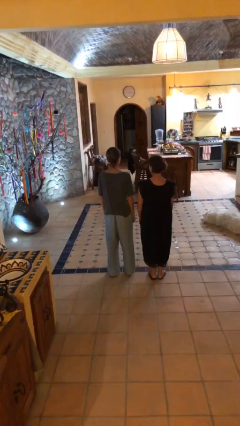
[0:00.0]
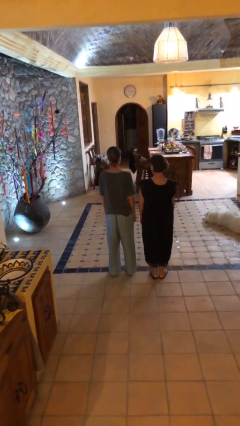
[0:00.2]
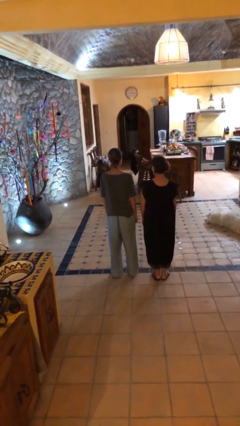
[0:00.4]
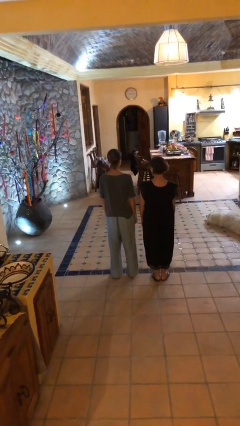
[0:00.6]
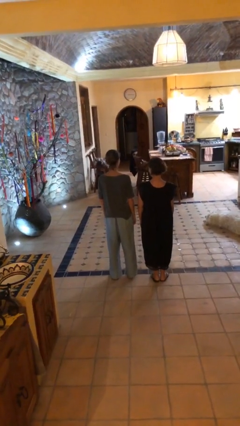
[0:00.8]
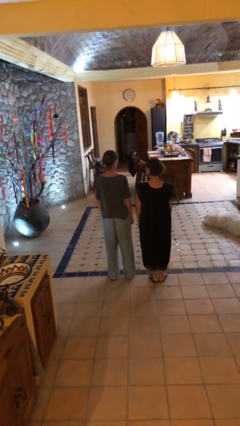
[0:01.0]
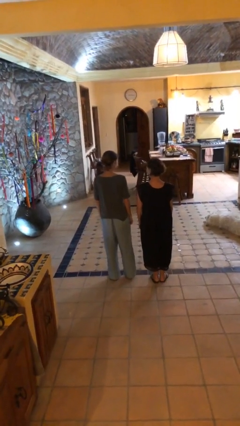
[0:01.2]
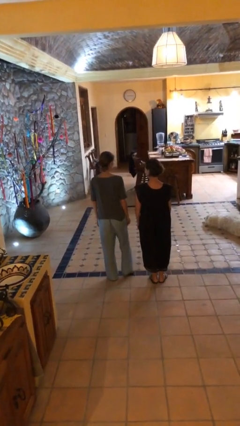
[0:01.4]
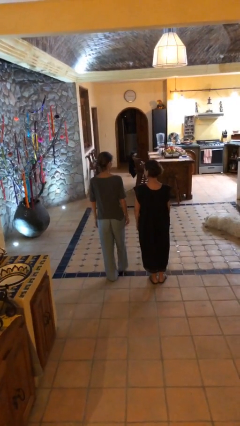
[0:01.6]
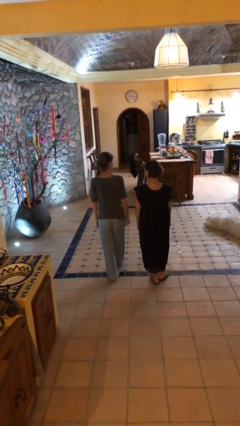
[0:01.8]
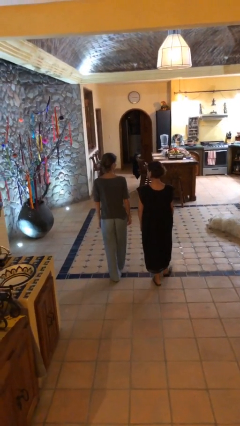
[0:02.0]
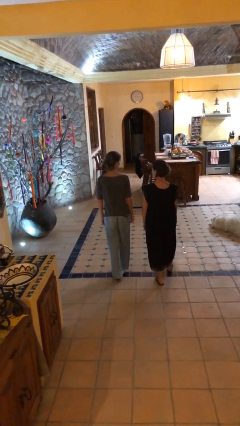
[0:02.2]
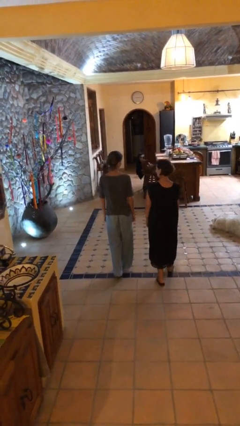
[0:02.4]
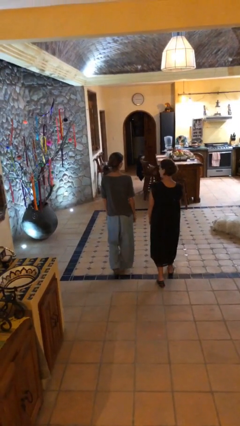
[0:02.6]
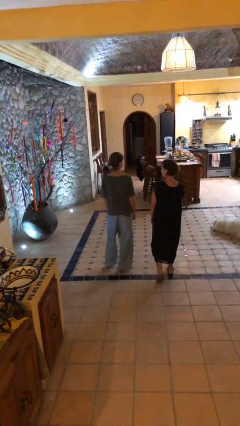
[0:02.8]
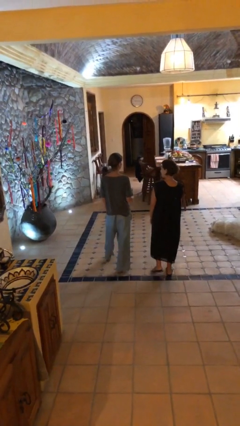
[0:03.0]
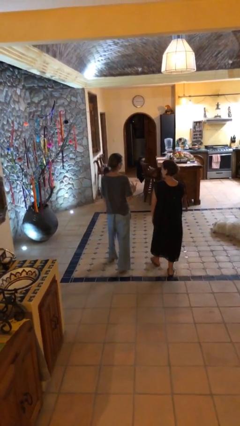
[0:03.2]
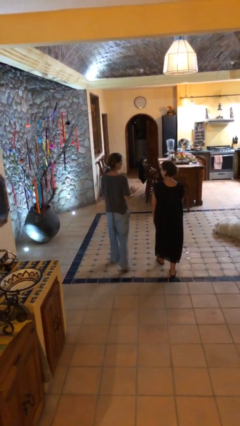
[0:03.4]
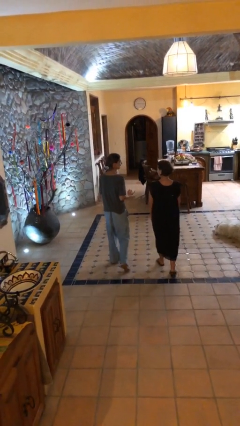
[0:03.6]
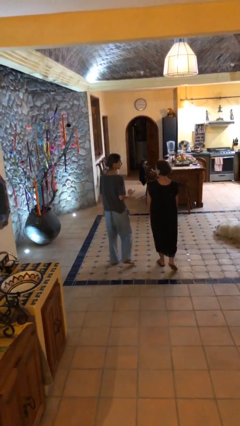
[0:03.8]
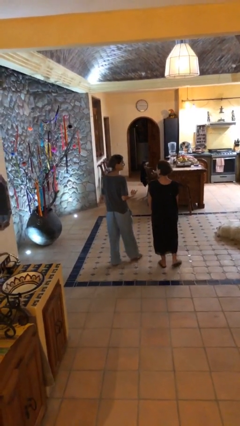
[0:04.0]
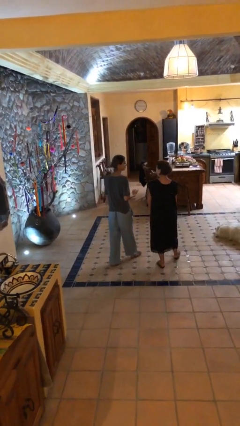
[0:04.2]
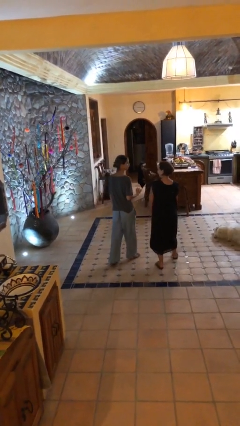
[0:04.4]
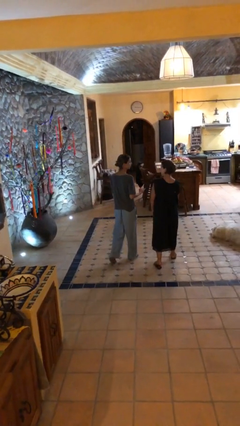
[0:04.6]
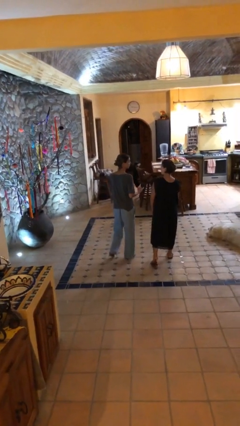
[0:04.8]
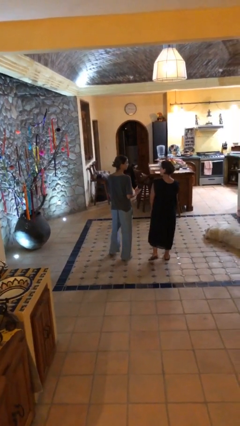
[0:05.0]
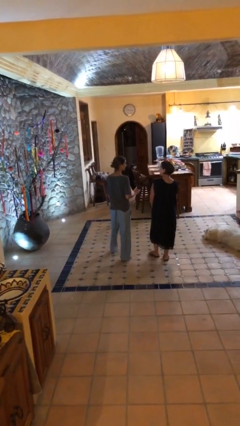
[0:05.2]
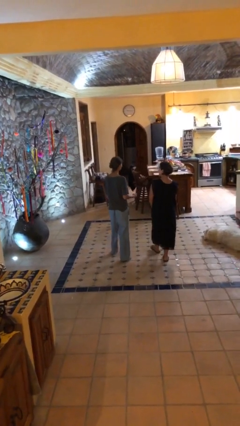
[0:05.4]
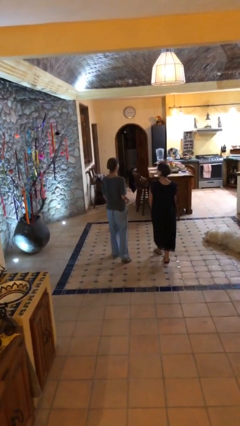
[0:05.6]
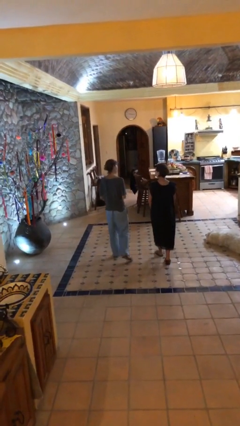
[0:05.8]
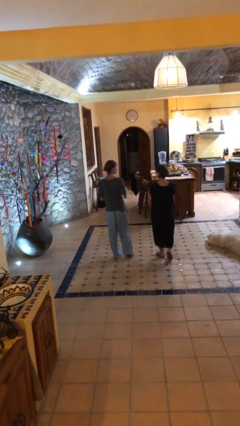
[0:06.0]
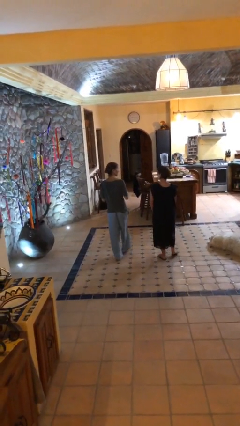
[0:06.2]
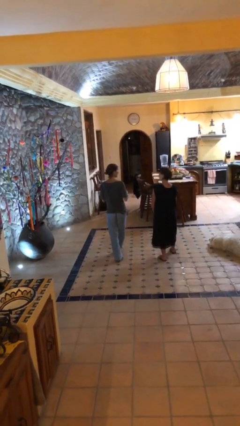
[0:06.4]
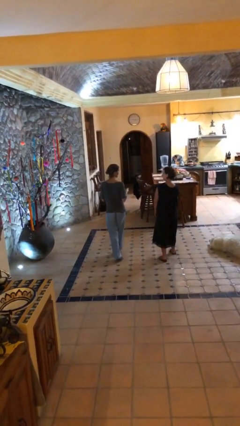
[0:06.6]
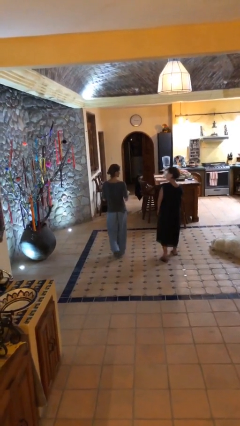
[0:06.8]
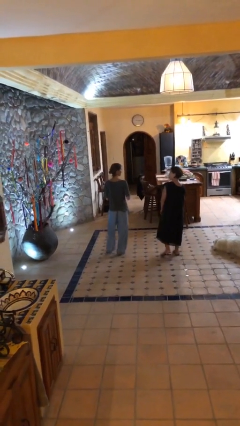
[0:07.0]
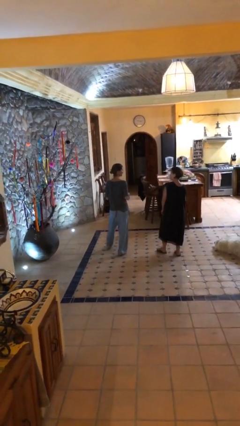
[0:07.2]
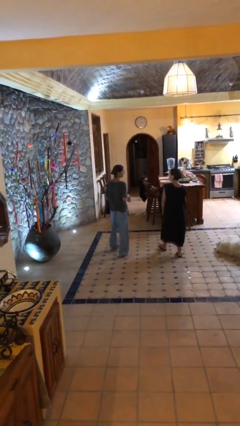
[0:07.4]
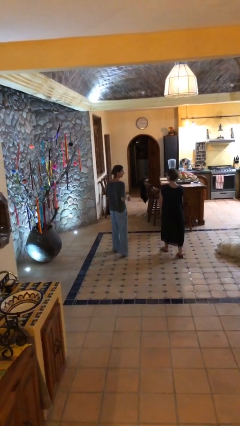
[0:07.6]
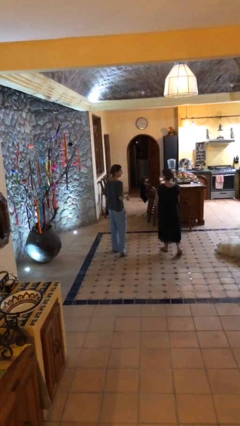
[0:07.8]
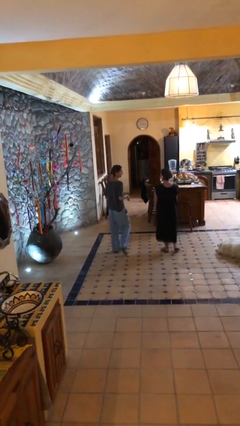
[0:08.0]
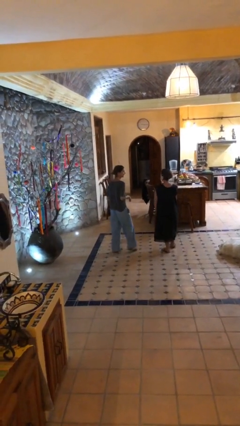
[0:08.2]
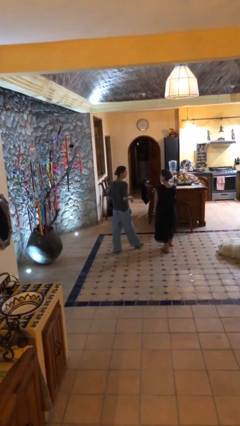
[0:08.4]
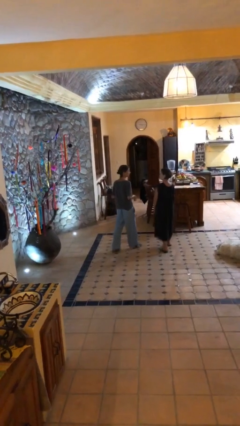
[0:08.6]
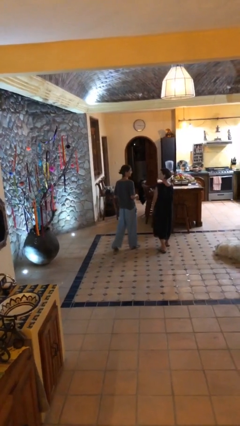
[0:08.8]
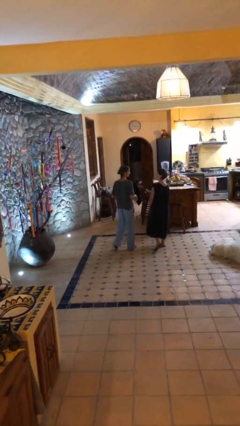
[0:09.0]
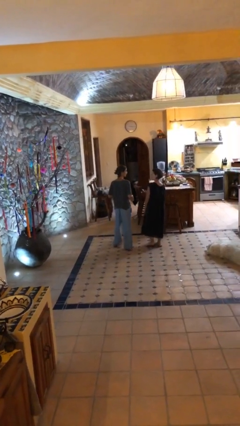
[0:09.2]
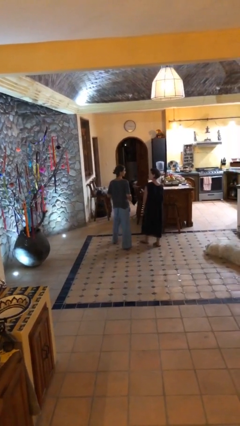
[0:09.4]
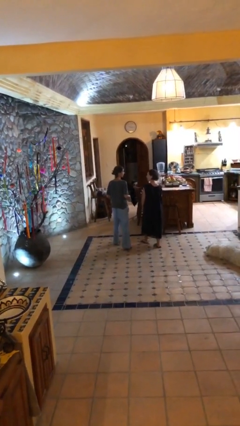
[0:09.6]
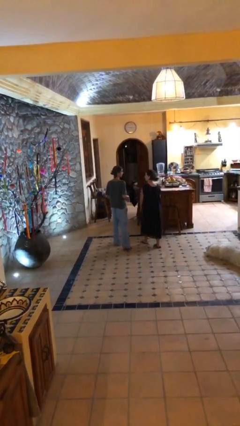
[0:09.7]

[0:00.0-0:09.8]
person talks to person

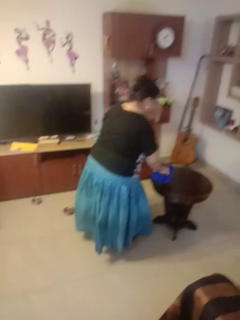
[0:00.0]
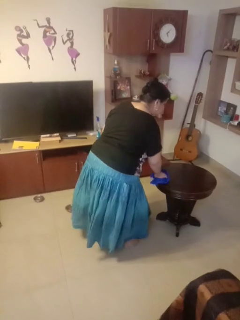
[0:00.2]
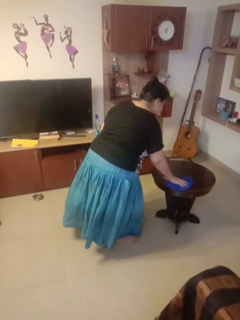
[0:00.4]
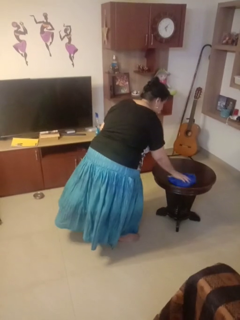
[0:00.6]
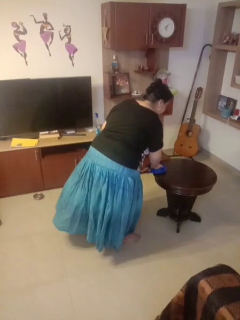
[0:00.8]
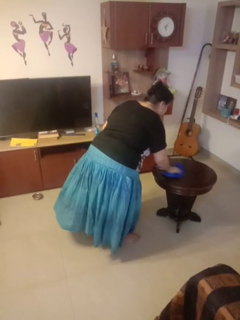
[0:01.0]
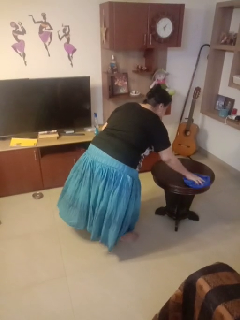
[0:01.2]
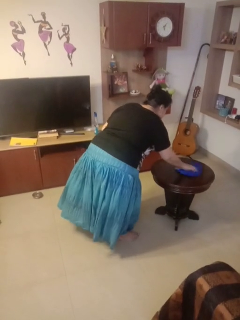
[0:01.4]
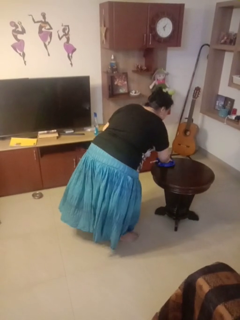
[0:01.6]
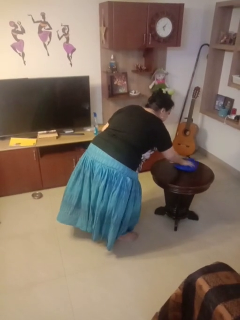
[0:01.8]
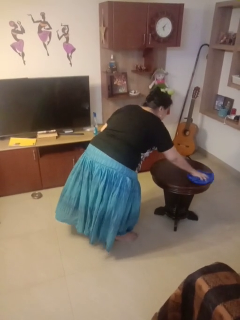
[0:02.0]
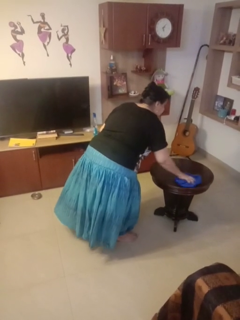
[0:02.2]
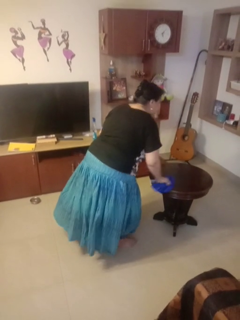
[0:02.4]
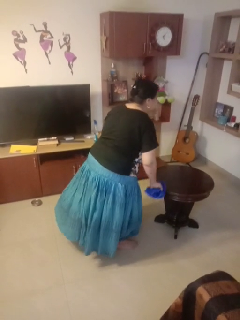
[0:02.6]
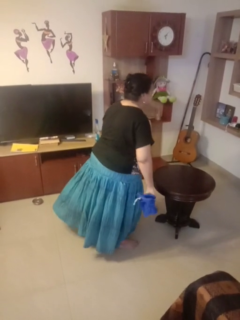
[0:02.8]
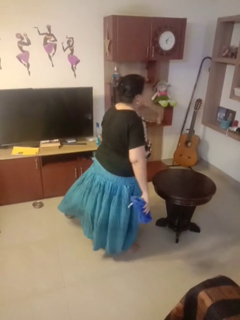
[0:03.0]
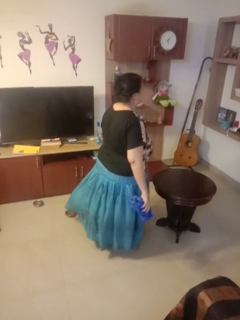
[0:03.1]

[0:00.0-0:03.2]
person cleans table with rag

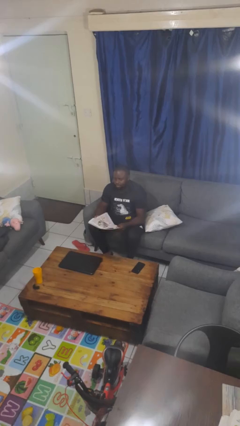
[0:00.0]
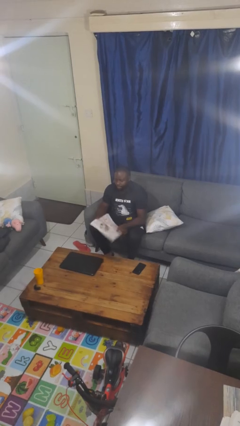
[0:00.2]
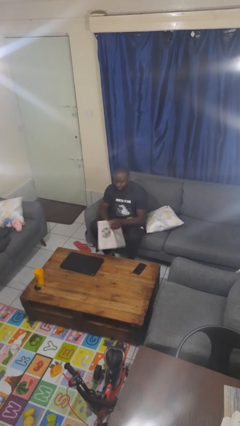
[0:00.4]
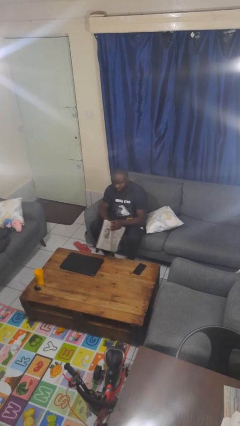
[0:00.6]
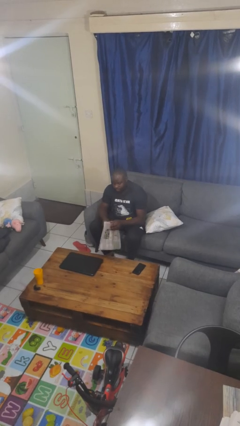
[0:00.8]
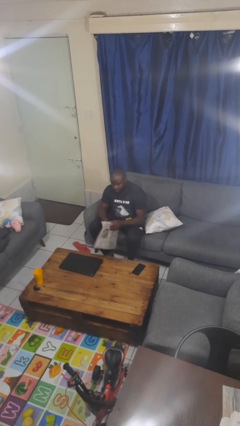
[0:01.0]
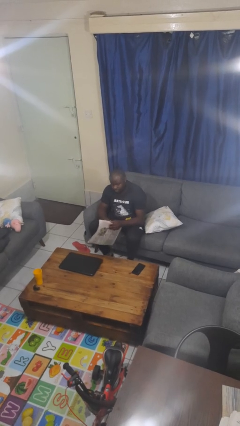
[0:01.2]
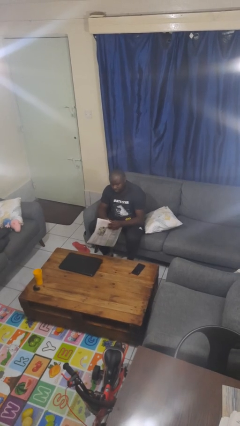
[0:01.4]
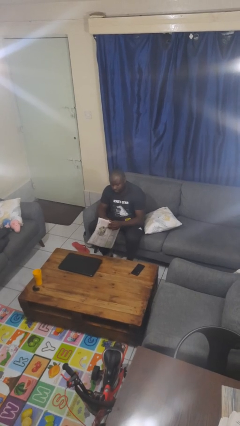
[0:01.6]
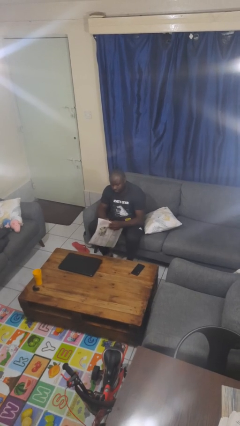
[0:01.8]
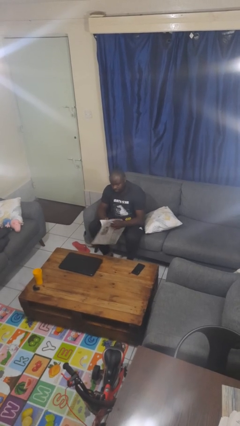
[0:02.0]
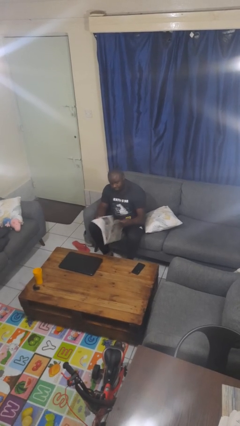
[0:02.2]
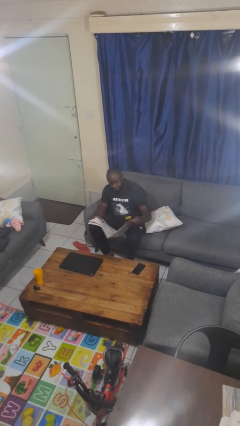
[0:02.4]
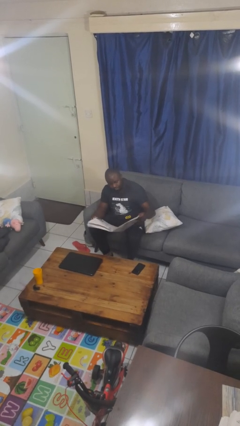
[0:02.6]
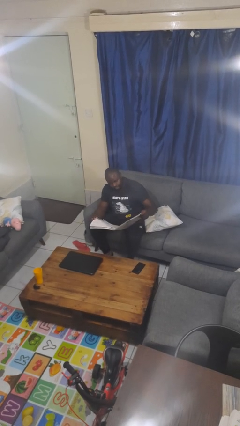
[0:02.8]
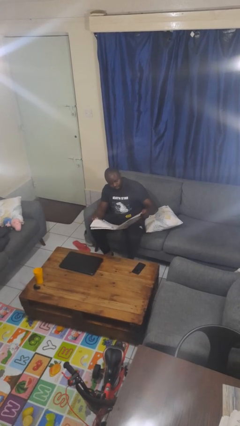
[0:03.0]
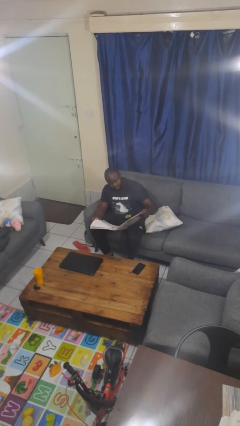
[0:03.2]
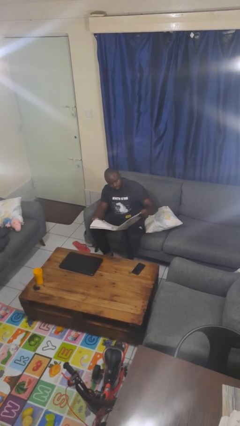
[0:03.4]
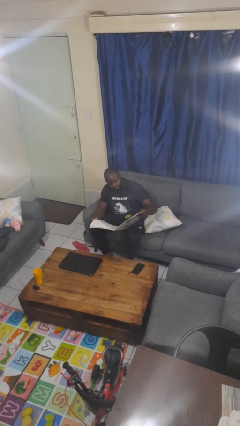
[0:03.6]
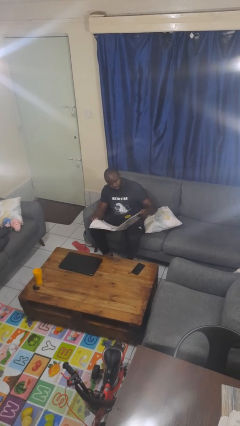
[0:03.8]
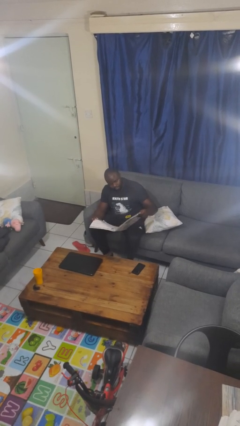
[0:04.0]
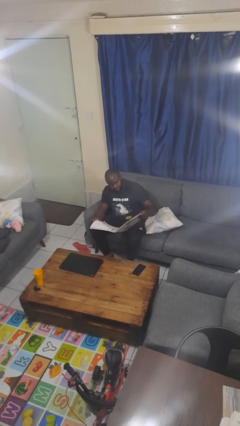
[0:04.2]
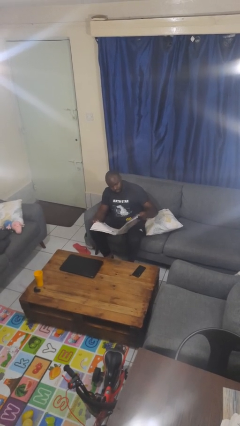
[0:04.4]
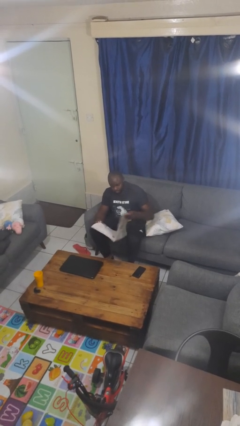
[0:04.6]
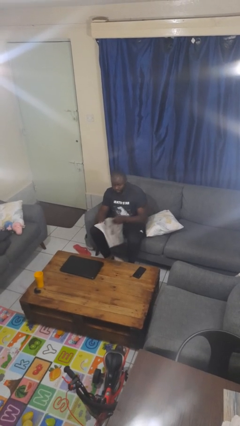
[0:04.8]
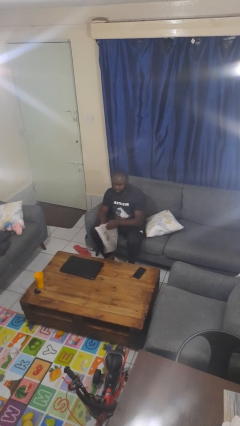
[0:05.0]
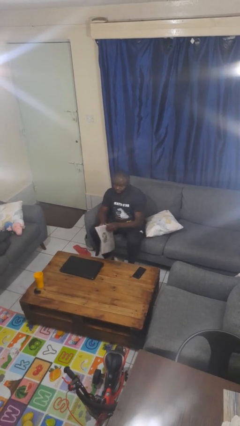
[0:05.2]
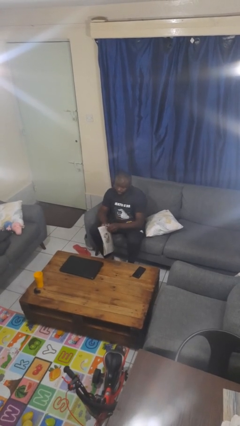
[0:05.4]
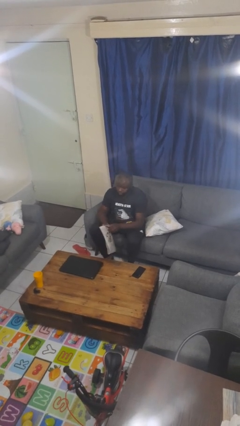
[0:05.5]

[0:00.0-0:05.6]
person reads newspaper

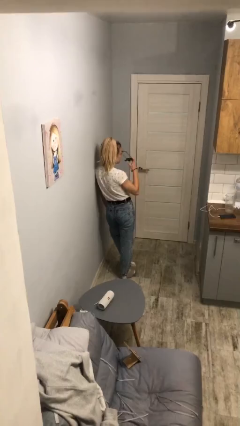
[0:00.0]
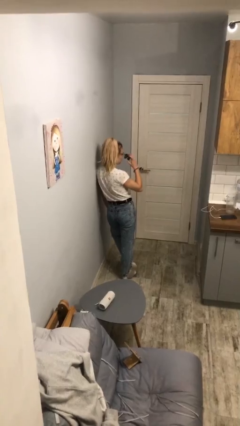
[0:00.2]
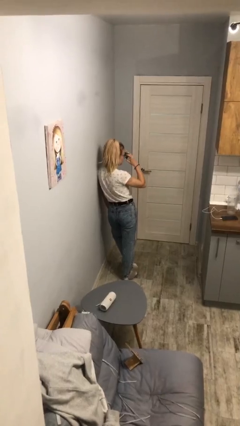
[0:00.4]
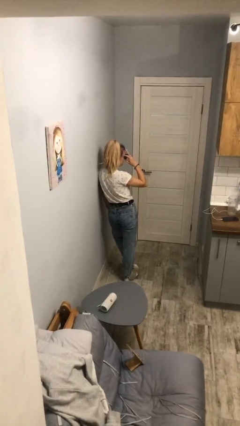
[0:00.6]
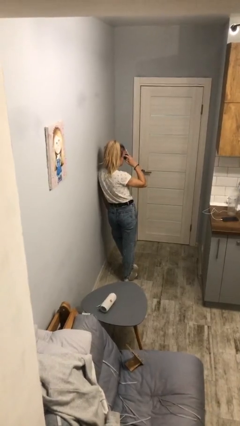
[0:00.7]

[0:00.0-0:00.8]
person puts on glasses
